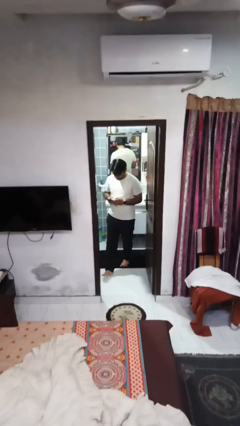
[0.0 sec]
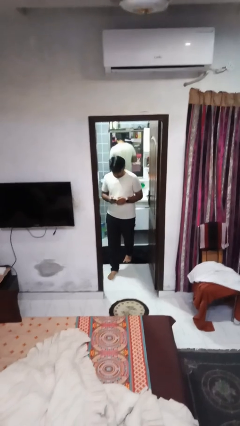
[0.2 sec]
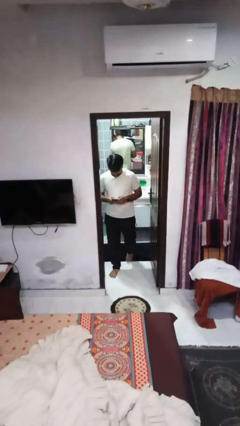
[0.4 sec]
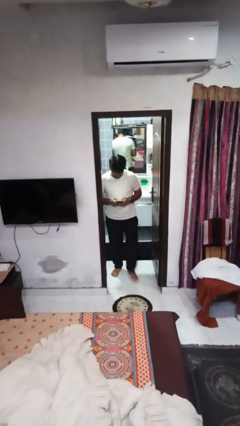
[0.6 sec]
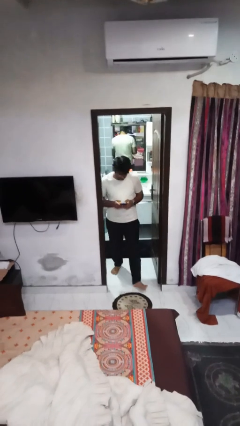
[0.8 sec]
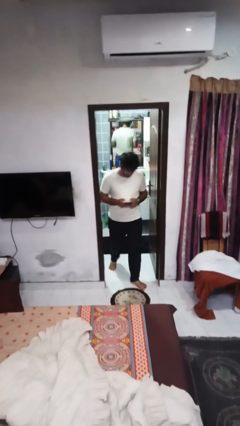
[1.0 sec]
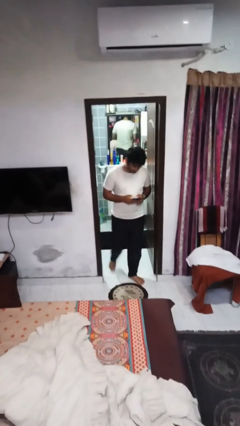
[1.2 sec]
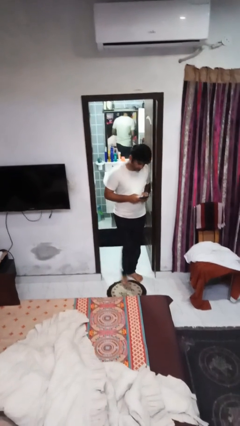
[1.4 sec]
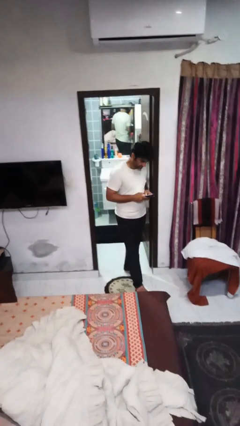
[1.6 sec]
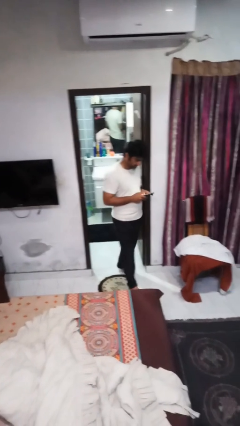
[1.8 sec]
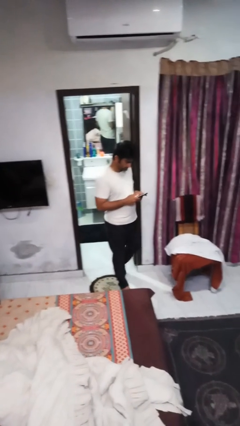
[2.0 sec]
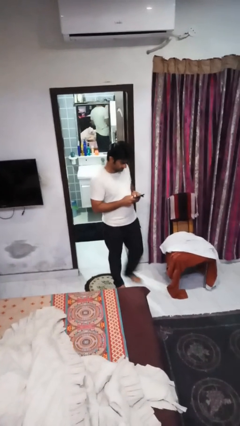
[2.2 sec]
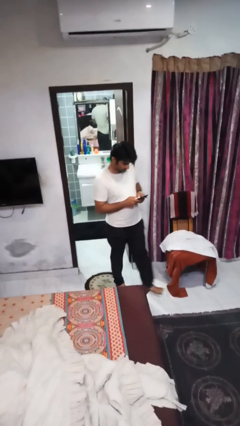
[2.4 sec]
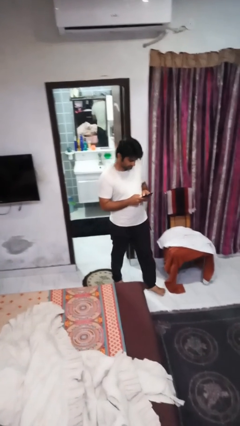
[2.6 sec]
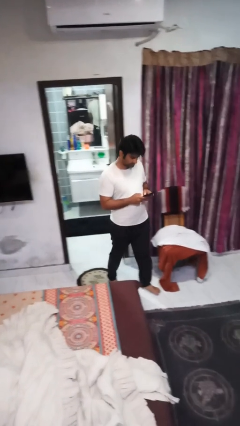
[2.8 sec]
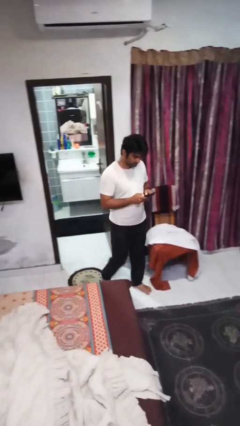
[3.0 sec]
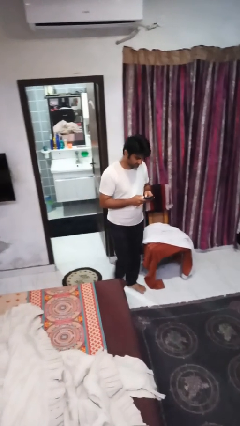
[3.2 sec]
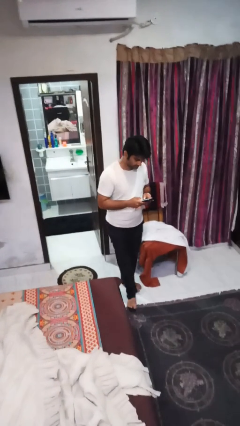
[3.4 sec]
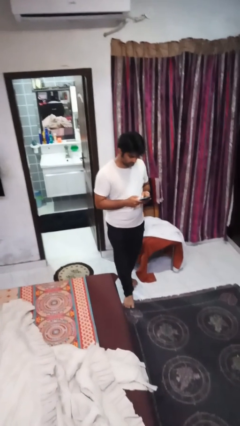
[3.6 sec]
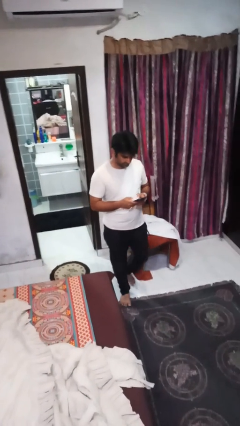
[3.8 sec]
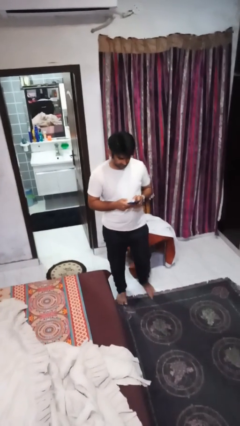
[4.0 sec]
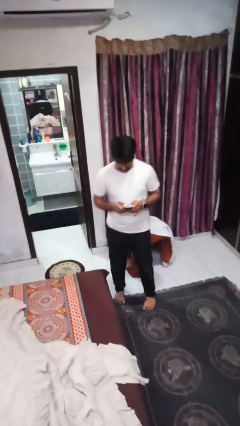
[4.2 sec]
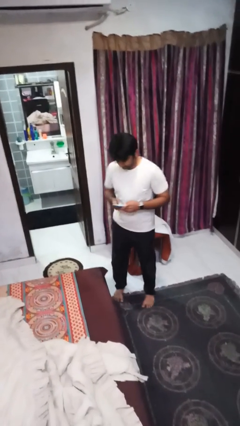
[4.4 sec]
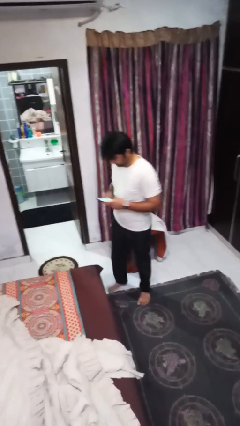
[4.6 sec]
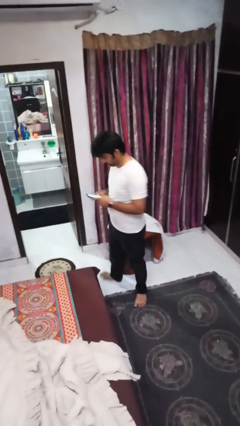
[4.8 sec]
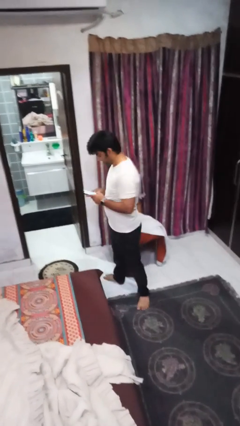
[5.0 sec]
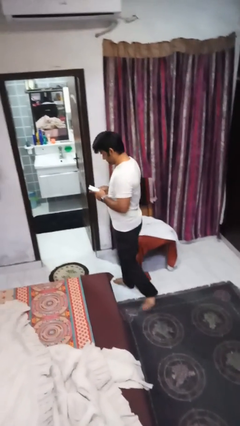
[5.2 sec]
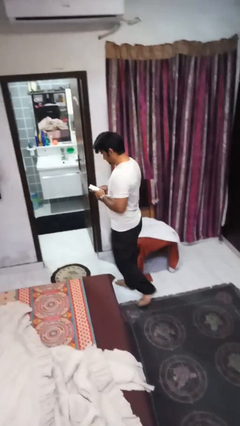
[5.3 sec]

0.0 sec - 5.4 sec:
person enters scene through structure

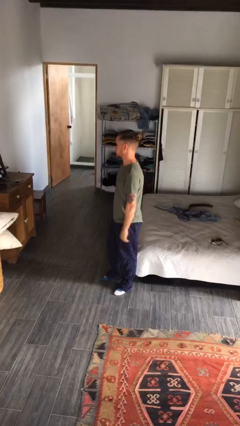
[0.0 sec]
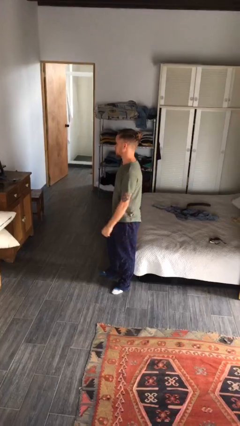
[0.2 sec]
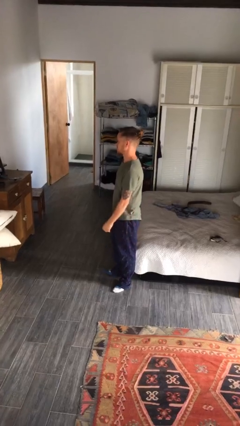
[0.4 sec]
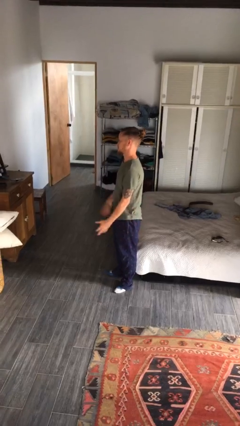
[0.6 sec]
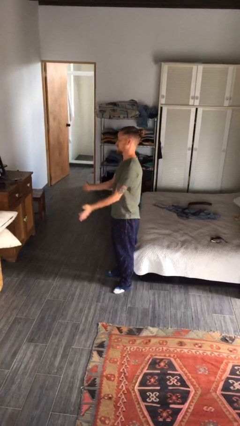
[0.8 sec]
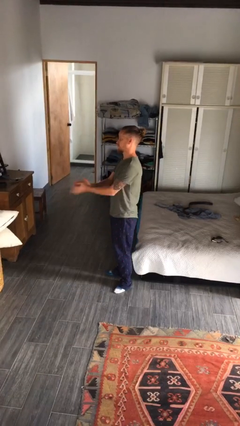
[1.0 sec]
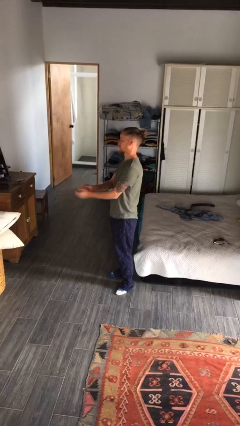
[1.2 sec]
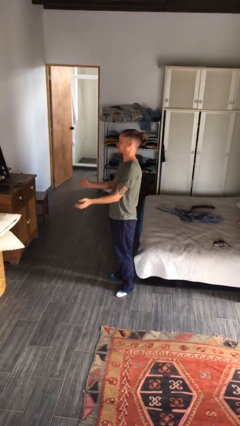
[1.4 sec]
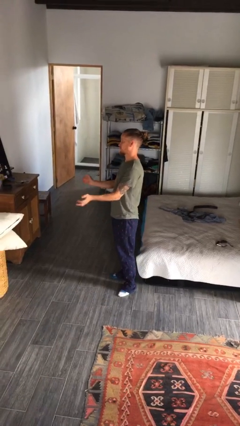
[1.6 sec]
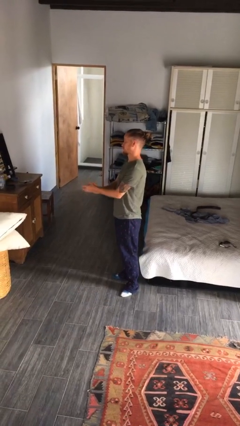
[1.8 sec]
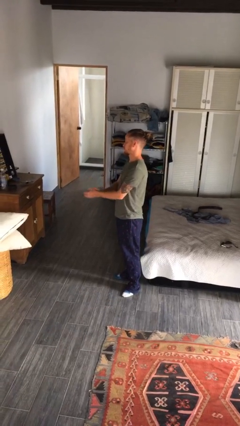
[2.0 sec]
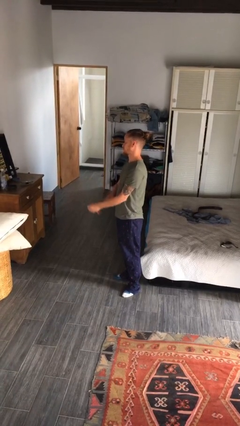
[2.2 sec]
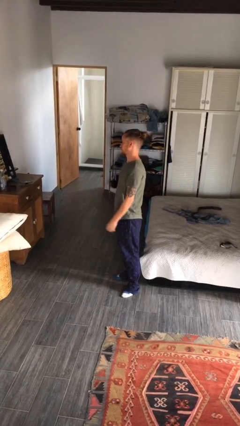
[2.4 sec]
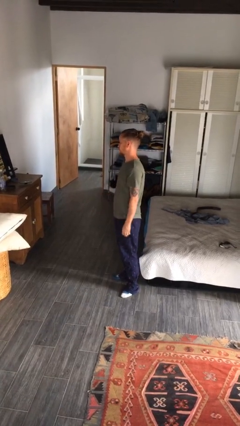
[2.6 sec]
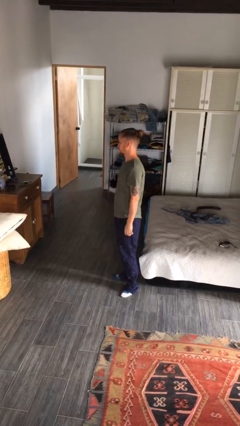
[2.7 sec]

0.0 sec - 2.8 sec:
person claps hands

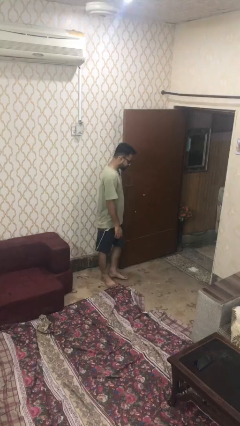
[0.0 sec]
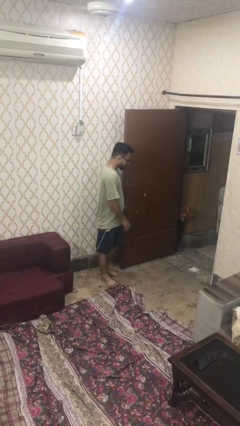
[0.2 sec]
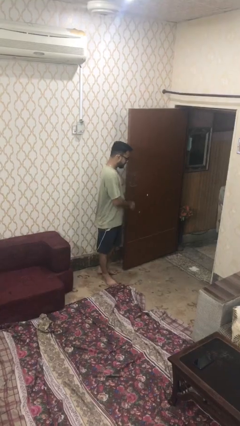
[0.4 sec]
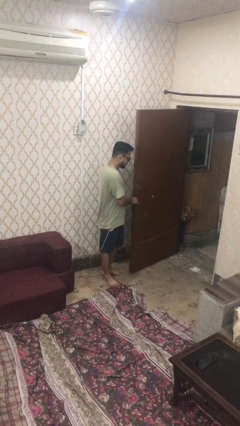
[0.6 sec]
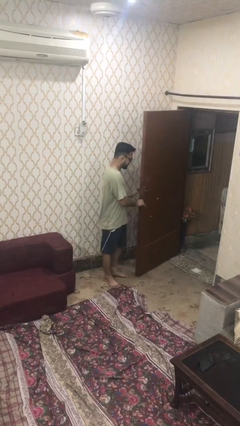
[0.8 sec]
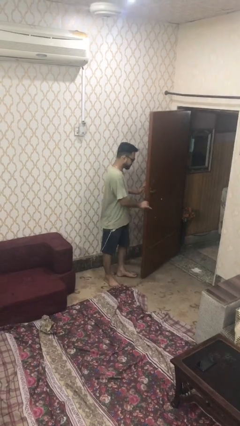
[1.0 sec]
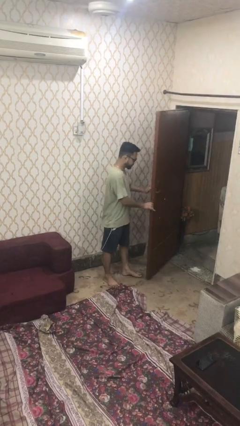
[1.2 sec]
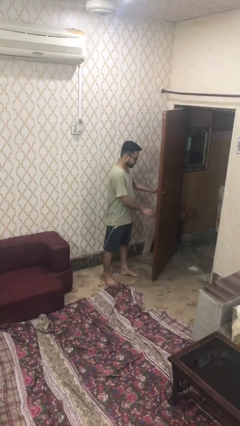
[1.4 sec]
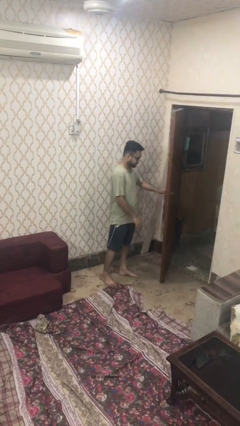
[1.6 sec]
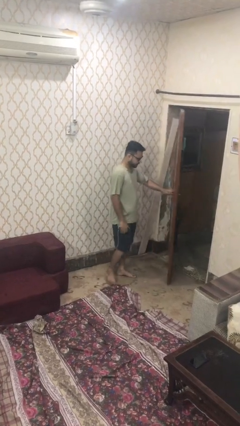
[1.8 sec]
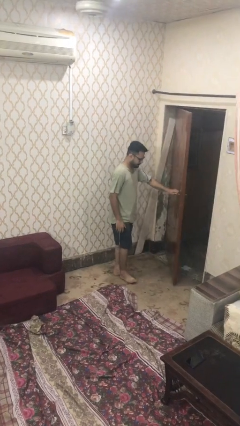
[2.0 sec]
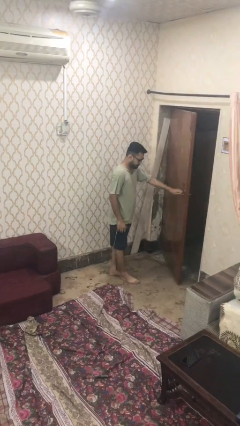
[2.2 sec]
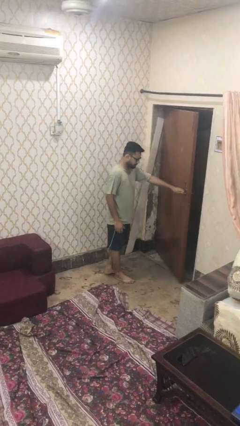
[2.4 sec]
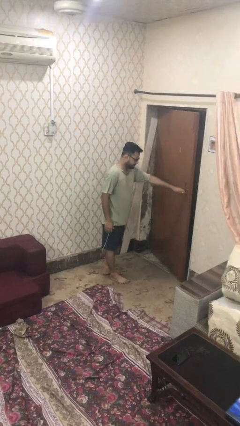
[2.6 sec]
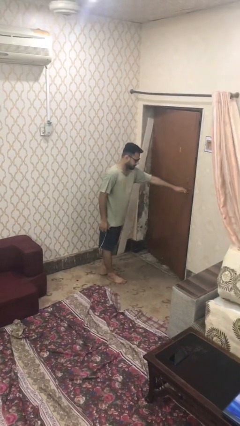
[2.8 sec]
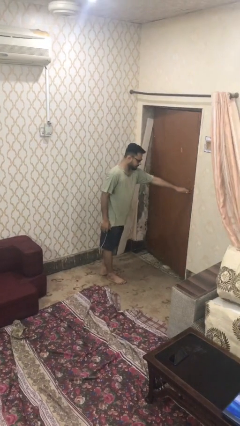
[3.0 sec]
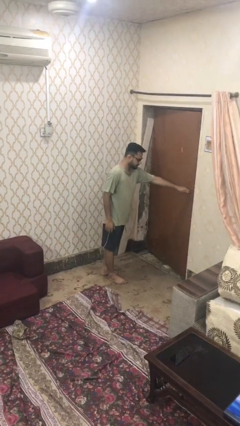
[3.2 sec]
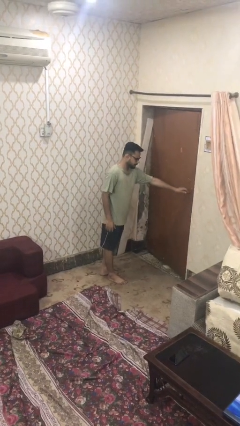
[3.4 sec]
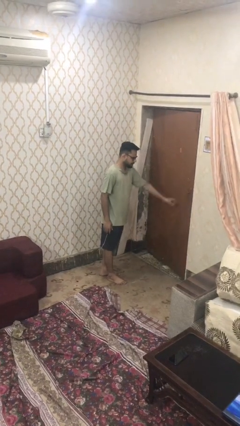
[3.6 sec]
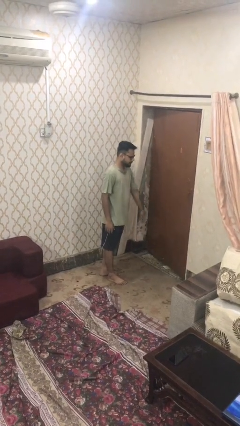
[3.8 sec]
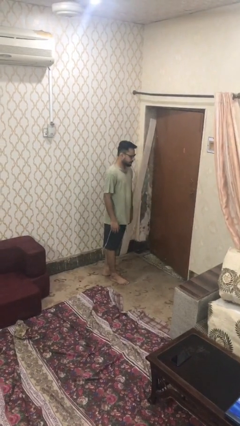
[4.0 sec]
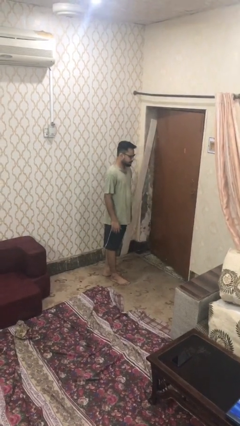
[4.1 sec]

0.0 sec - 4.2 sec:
person closes facility door

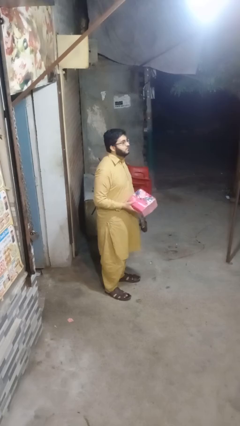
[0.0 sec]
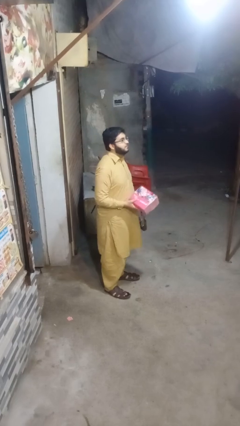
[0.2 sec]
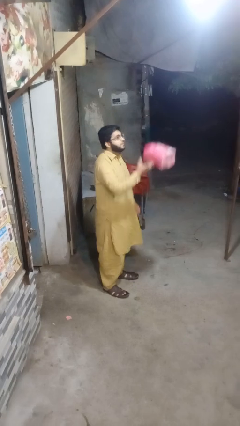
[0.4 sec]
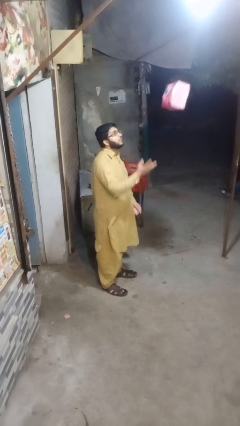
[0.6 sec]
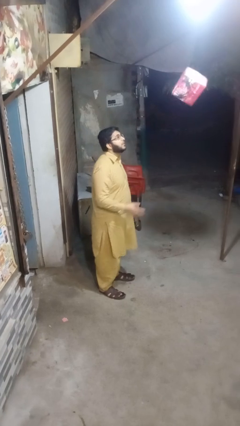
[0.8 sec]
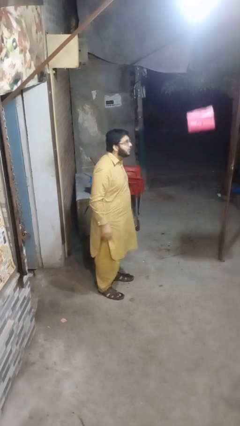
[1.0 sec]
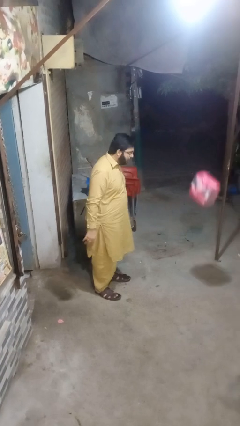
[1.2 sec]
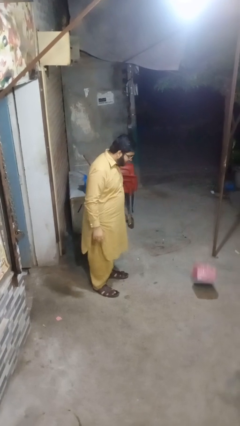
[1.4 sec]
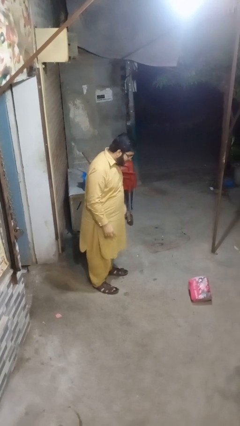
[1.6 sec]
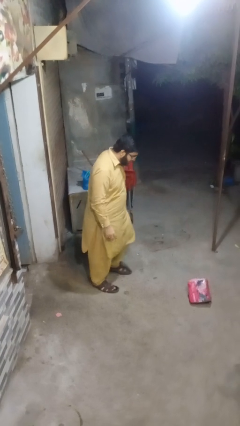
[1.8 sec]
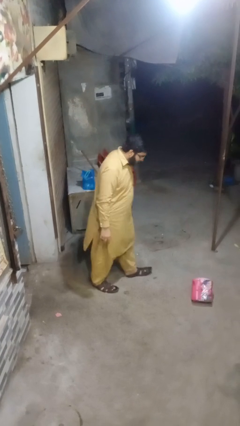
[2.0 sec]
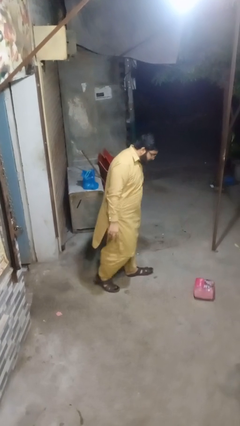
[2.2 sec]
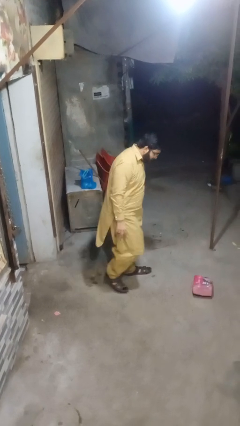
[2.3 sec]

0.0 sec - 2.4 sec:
person throws object into air

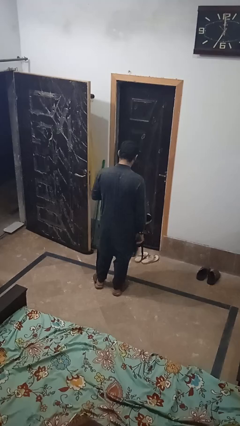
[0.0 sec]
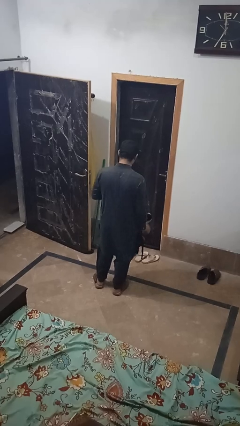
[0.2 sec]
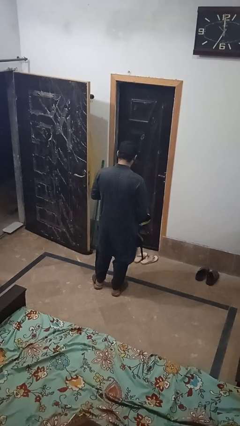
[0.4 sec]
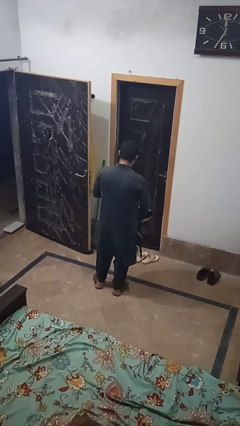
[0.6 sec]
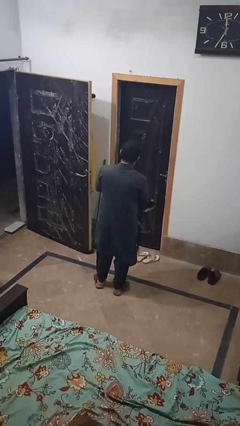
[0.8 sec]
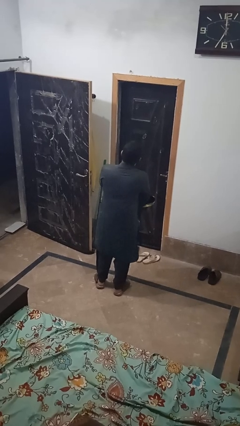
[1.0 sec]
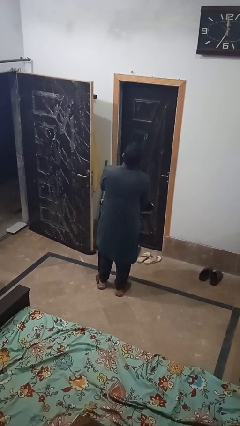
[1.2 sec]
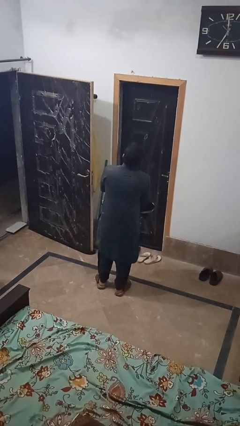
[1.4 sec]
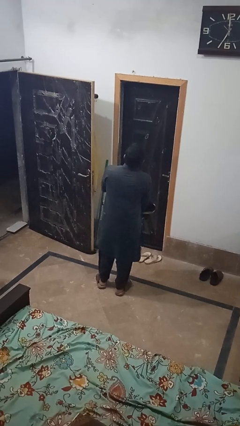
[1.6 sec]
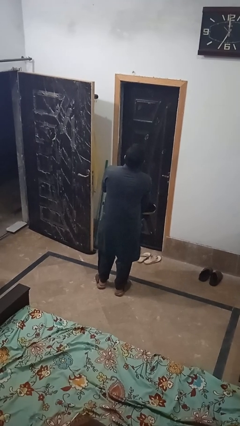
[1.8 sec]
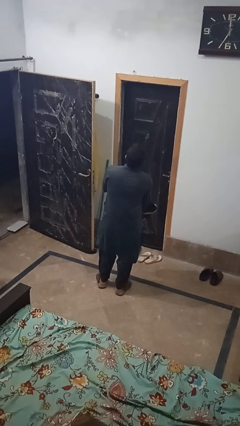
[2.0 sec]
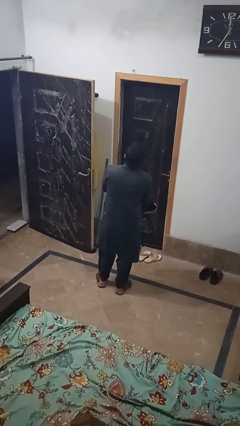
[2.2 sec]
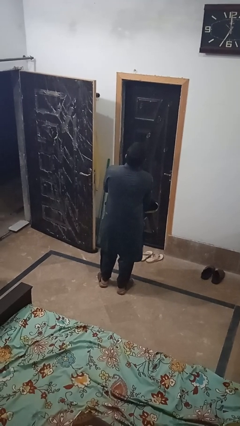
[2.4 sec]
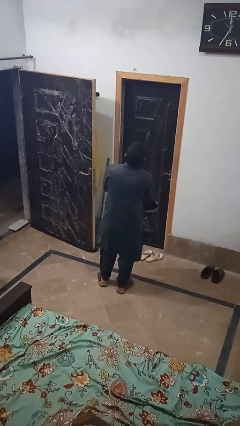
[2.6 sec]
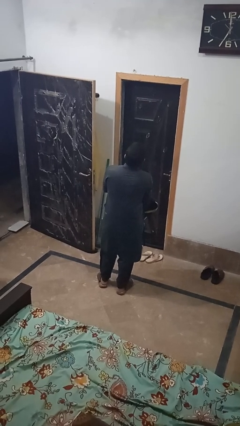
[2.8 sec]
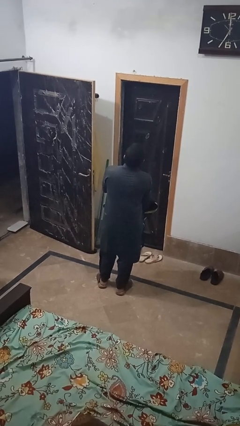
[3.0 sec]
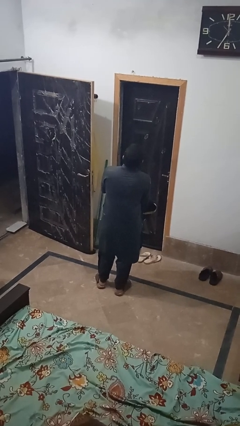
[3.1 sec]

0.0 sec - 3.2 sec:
person searches in bag
